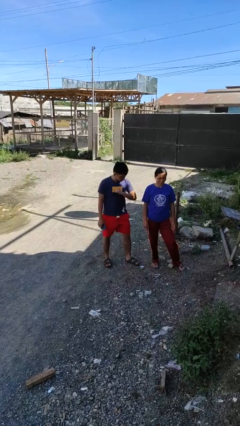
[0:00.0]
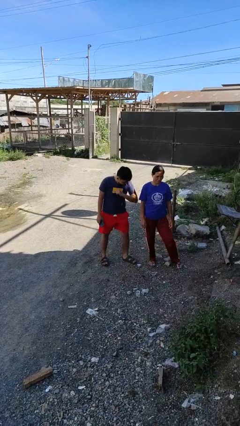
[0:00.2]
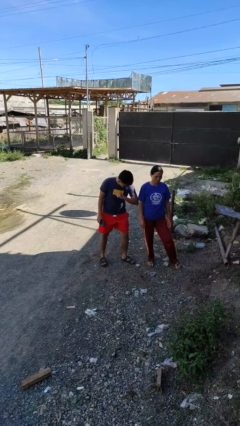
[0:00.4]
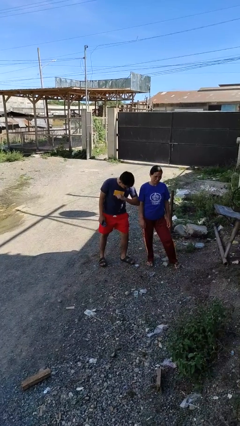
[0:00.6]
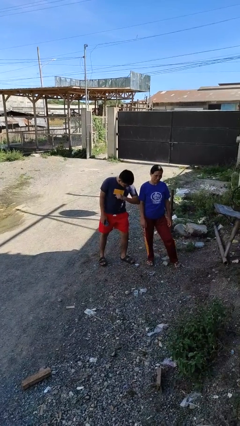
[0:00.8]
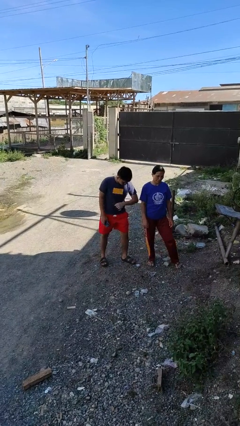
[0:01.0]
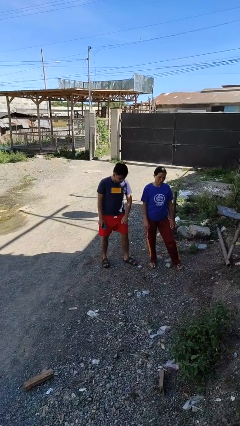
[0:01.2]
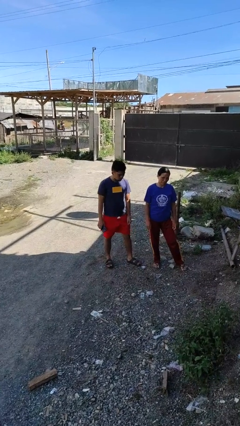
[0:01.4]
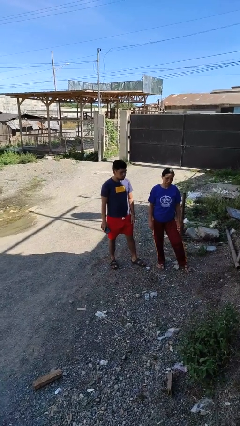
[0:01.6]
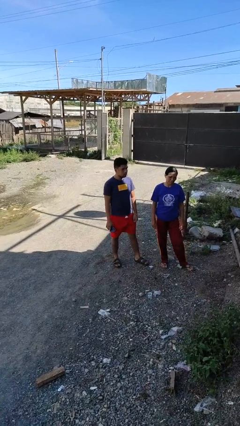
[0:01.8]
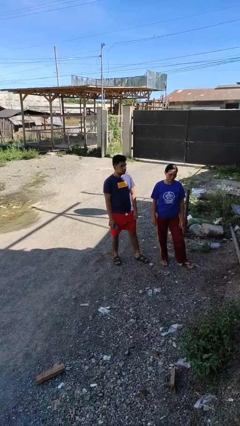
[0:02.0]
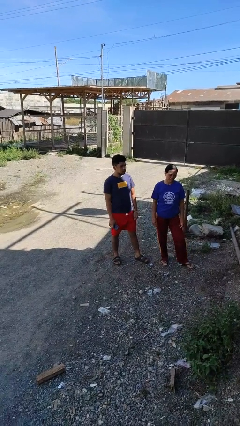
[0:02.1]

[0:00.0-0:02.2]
person nudges person with elbow

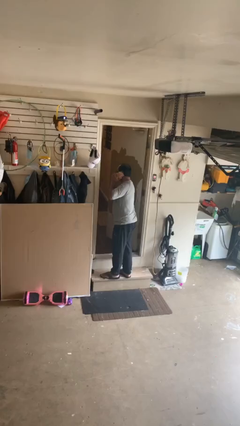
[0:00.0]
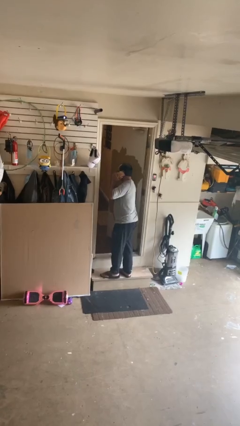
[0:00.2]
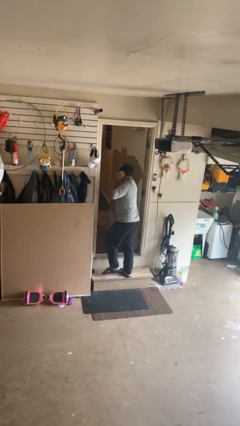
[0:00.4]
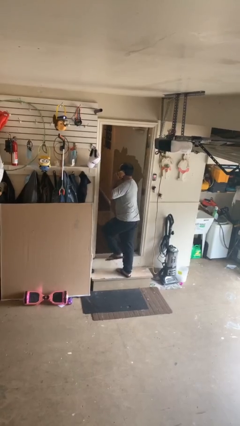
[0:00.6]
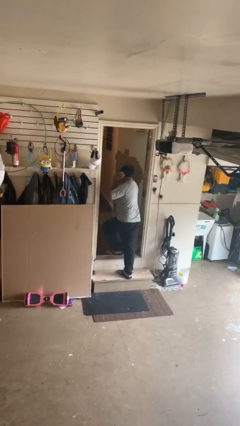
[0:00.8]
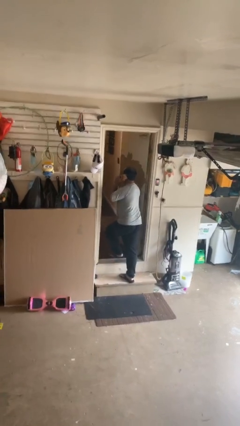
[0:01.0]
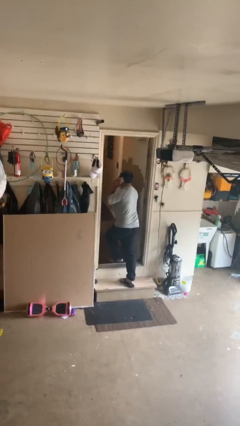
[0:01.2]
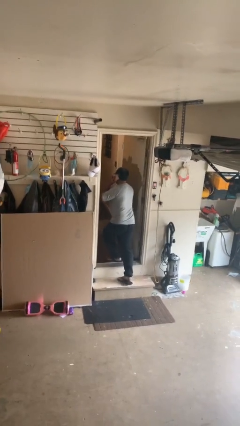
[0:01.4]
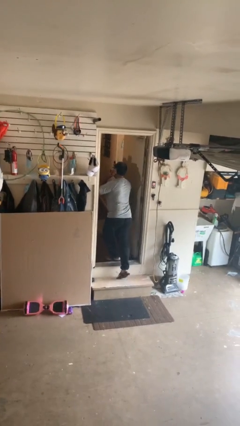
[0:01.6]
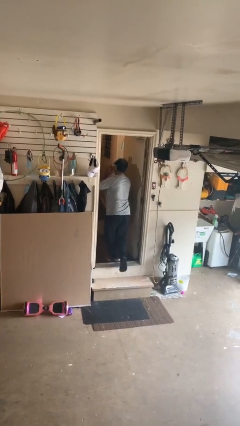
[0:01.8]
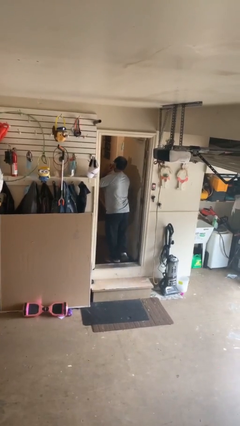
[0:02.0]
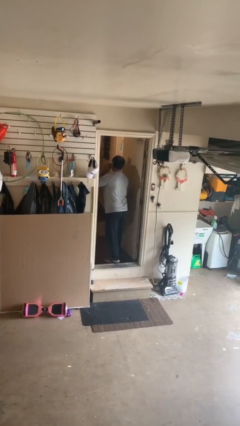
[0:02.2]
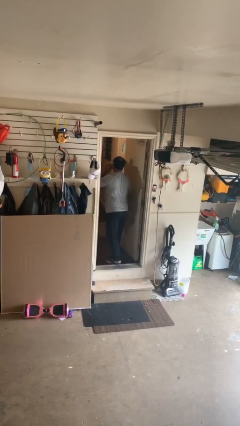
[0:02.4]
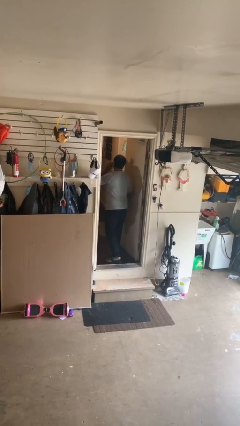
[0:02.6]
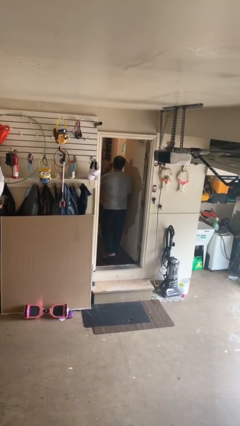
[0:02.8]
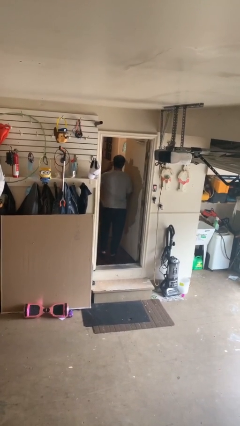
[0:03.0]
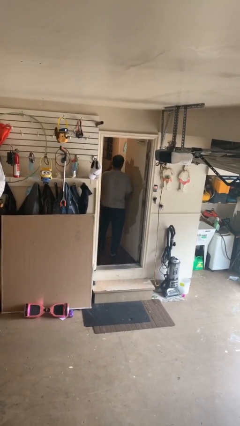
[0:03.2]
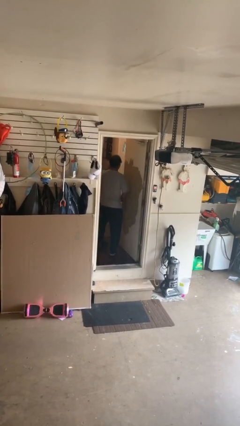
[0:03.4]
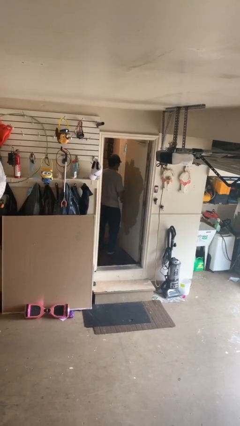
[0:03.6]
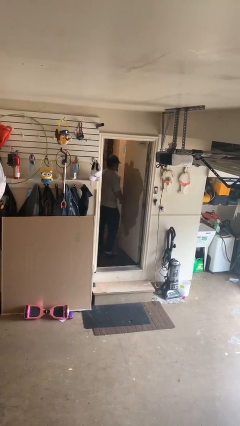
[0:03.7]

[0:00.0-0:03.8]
person exits scene through structure

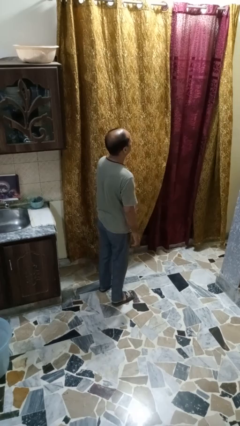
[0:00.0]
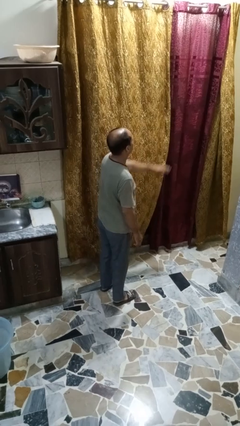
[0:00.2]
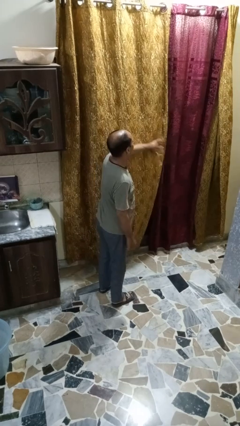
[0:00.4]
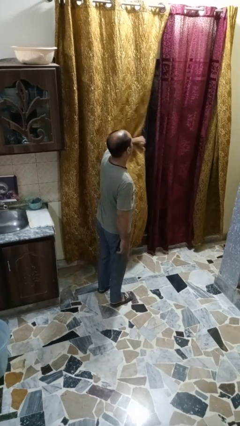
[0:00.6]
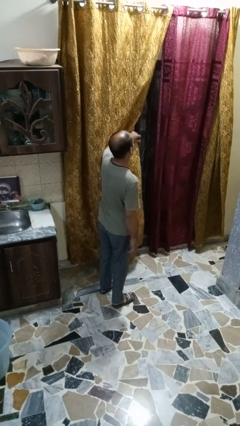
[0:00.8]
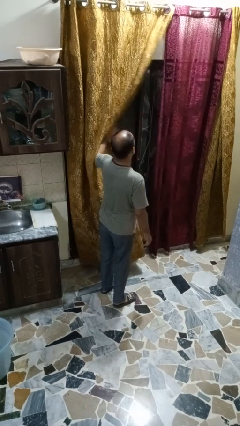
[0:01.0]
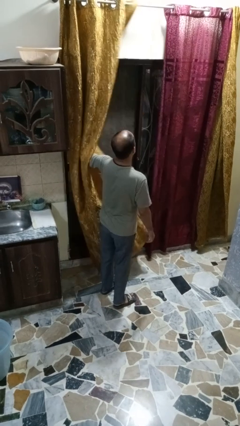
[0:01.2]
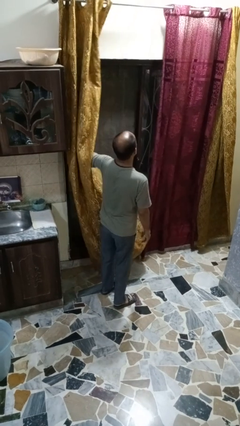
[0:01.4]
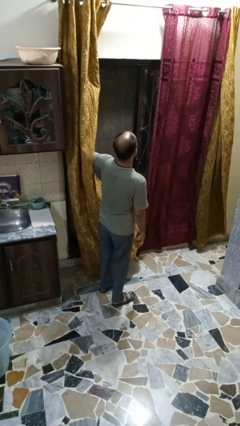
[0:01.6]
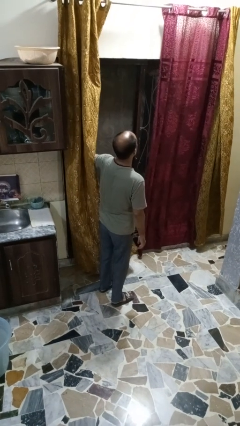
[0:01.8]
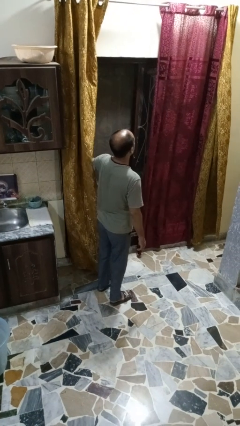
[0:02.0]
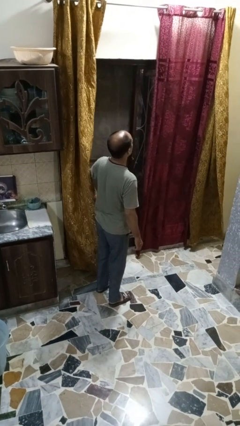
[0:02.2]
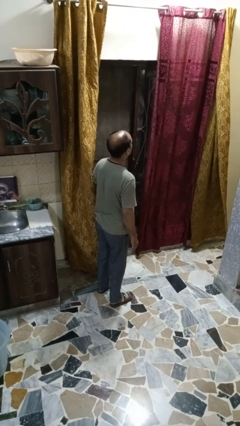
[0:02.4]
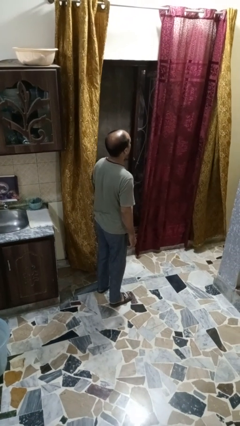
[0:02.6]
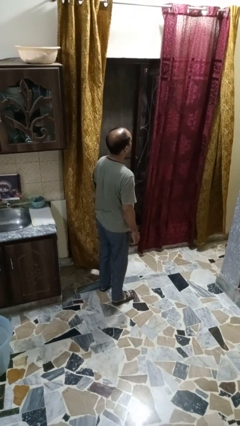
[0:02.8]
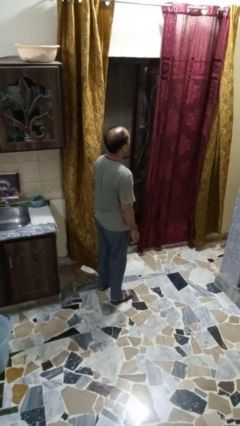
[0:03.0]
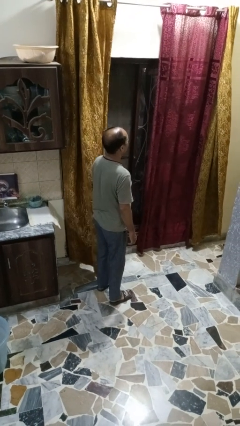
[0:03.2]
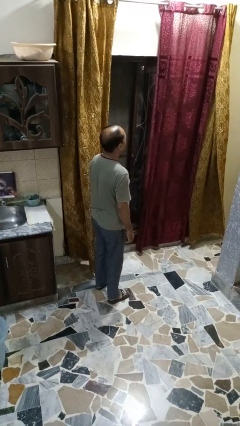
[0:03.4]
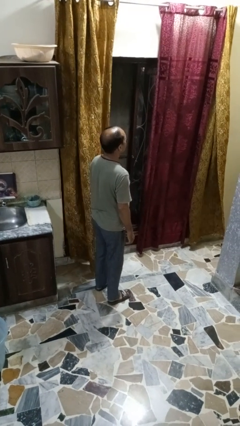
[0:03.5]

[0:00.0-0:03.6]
person opens curtains

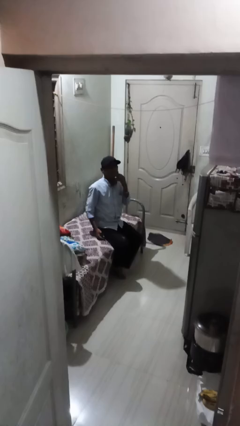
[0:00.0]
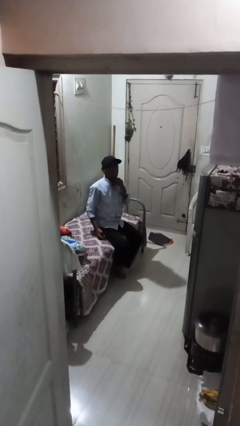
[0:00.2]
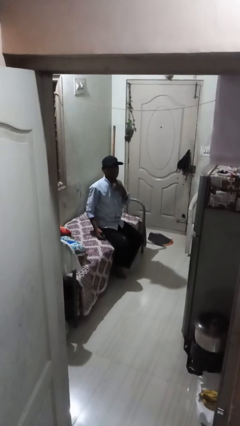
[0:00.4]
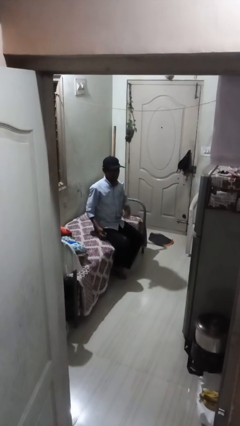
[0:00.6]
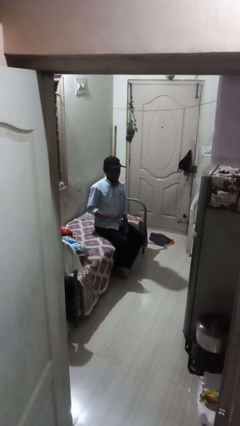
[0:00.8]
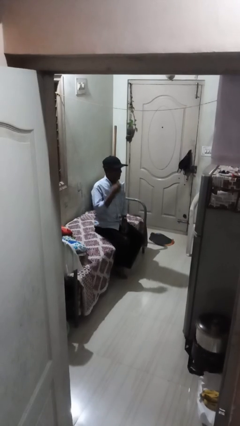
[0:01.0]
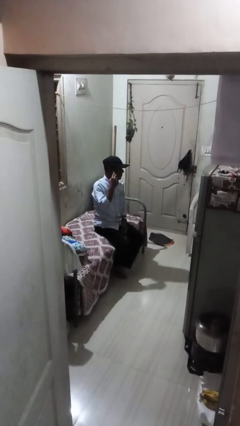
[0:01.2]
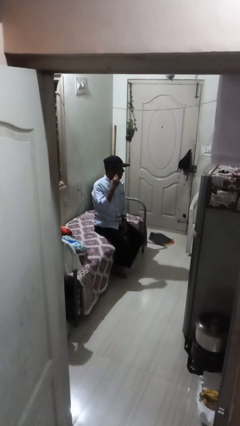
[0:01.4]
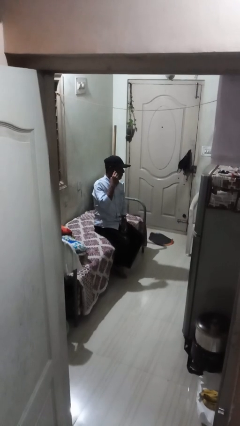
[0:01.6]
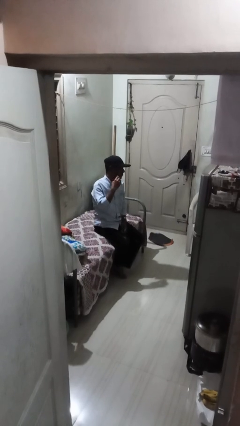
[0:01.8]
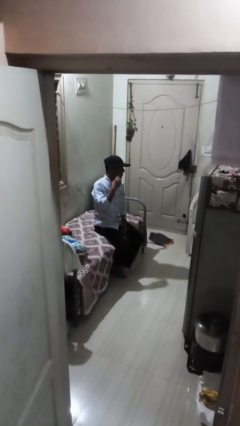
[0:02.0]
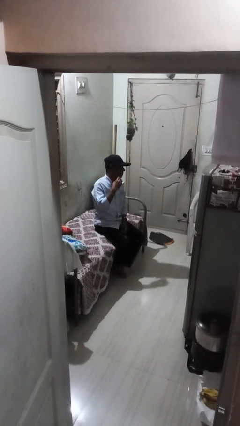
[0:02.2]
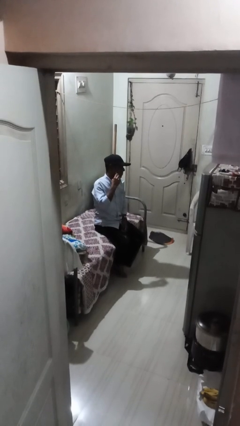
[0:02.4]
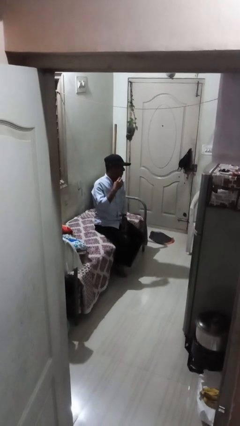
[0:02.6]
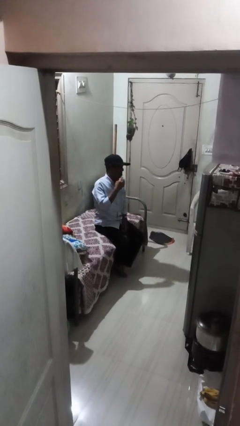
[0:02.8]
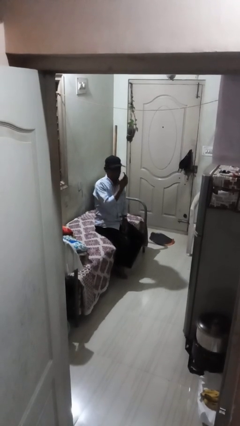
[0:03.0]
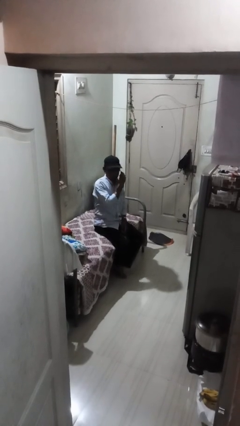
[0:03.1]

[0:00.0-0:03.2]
person shaves face

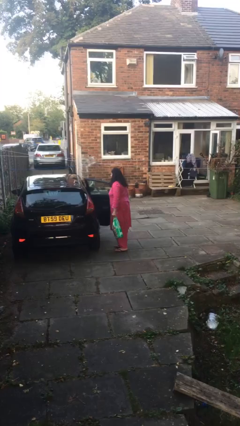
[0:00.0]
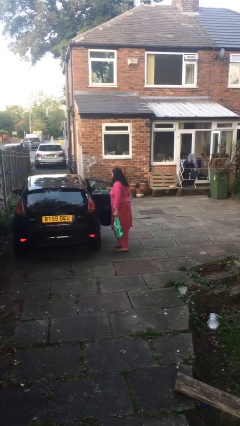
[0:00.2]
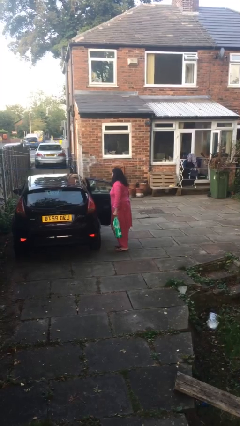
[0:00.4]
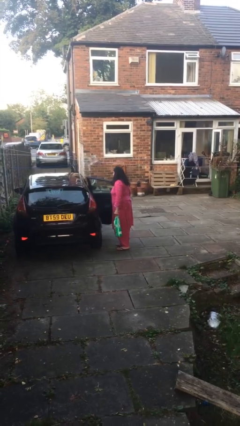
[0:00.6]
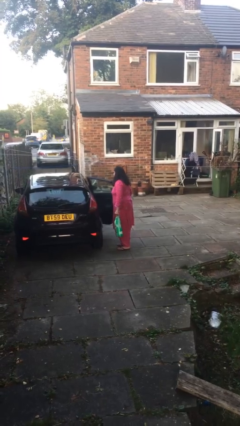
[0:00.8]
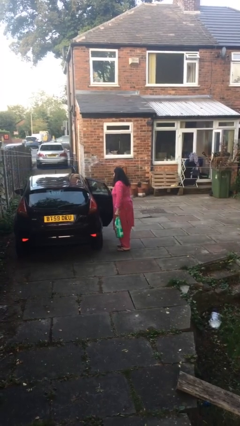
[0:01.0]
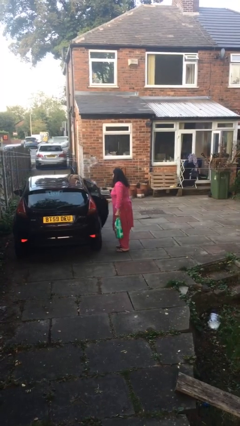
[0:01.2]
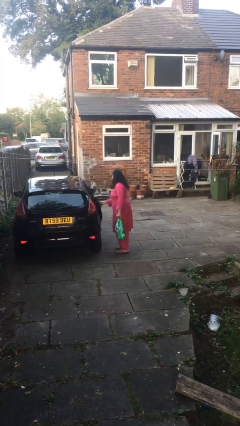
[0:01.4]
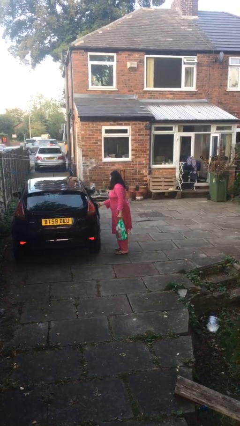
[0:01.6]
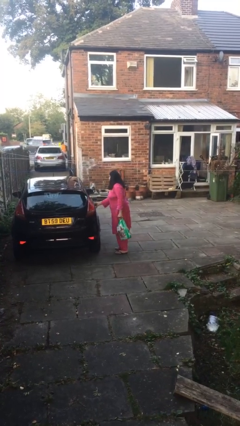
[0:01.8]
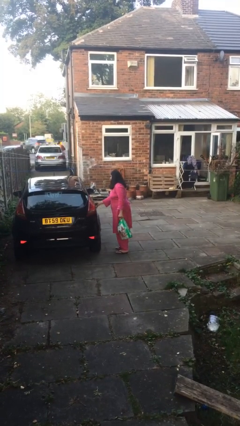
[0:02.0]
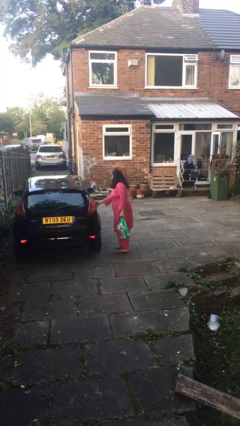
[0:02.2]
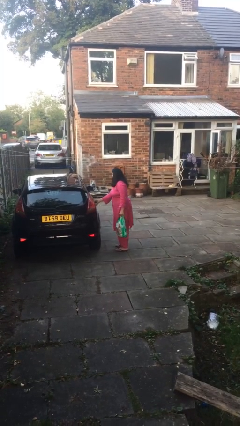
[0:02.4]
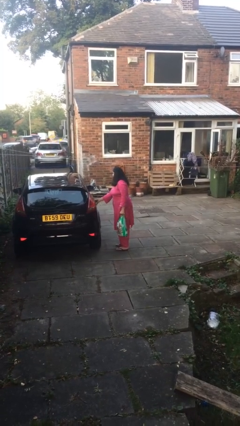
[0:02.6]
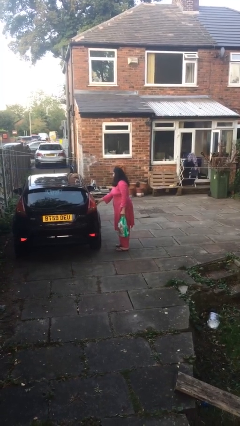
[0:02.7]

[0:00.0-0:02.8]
person closes car door

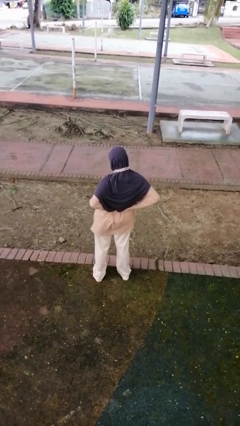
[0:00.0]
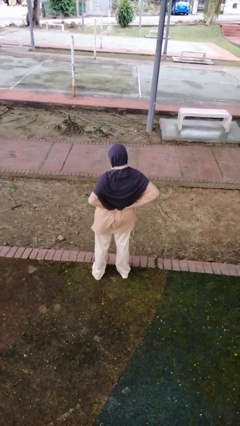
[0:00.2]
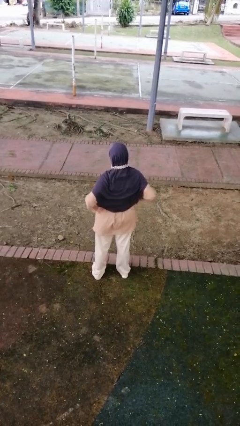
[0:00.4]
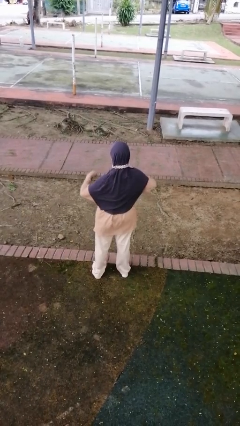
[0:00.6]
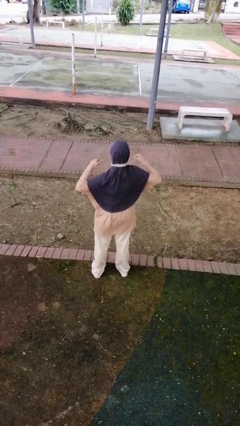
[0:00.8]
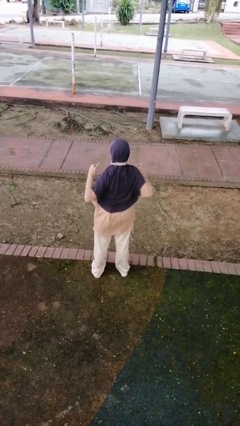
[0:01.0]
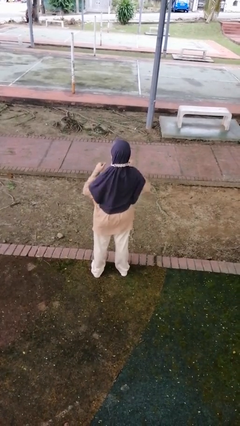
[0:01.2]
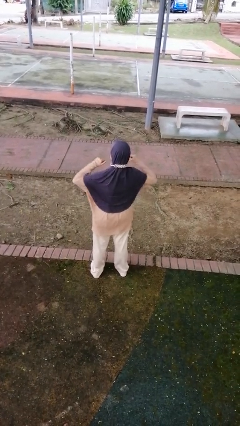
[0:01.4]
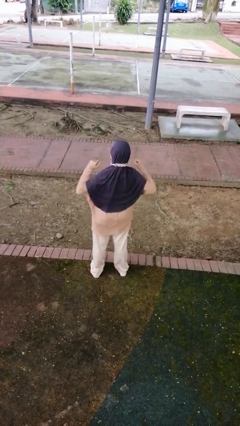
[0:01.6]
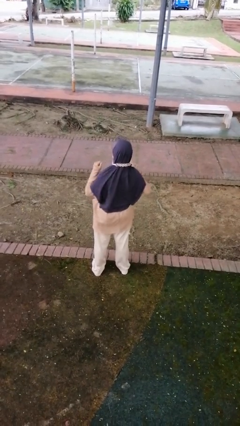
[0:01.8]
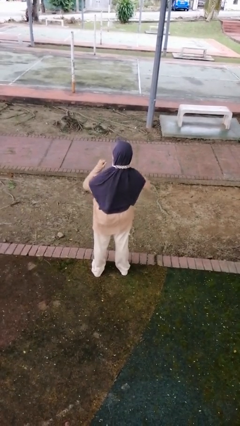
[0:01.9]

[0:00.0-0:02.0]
person stretches arms to side
